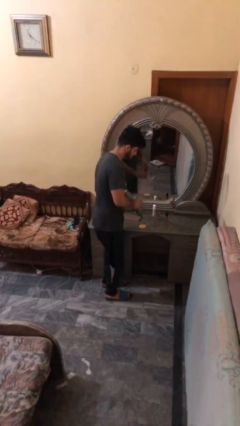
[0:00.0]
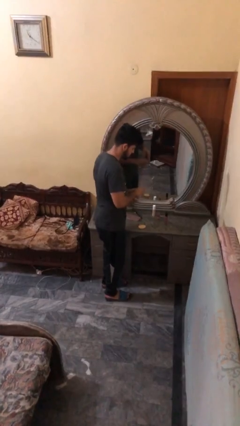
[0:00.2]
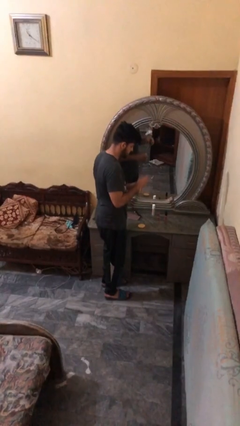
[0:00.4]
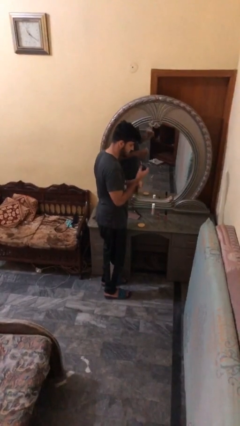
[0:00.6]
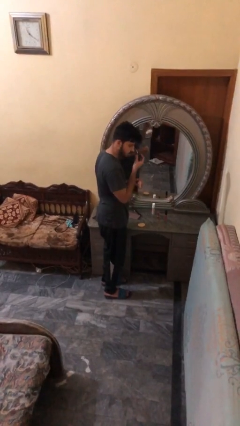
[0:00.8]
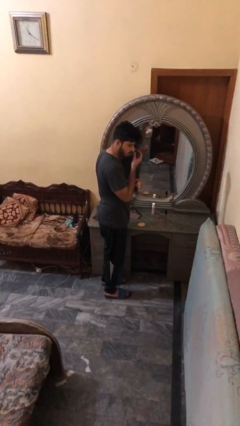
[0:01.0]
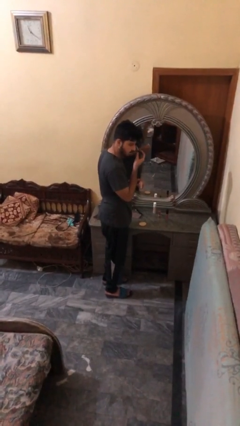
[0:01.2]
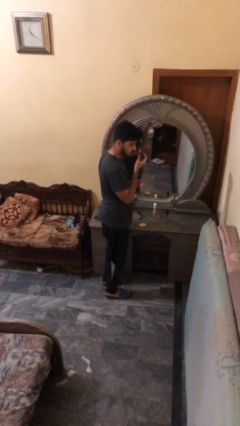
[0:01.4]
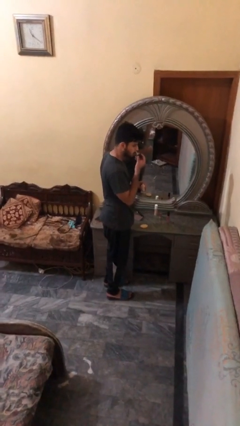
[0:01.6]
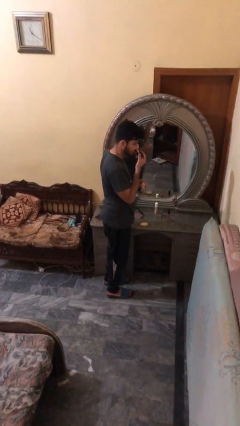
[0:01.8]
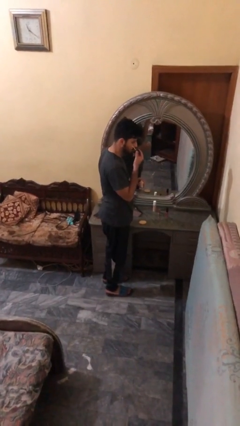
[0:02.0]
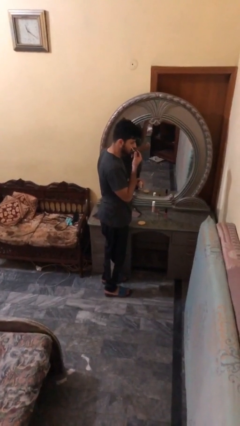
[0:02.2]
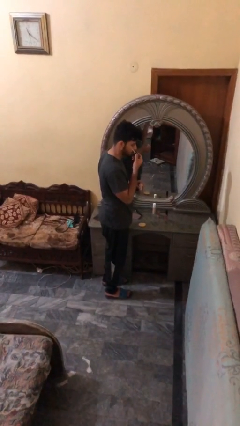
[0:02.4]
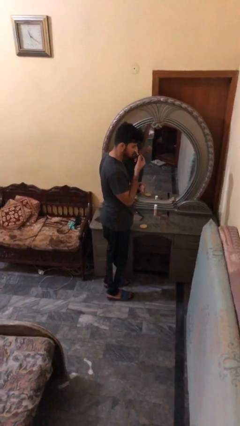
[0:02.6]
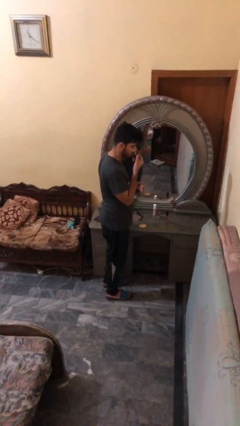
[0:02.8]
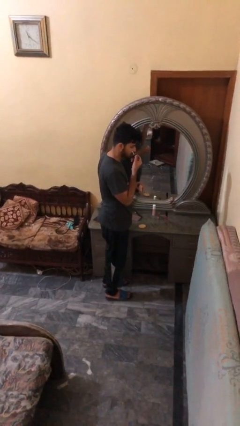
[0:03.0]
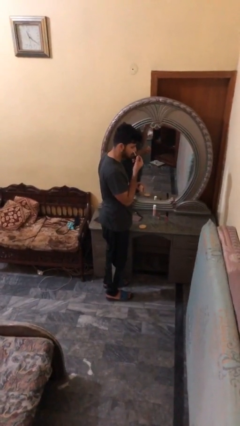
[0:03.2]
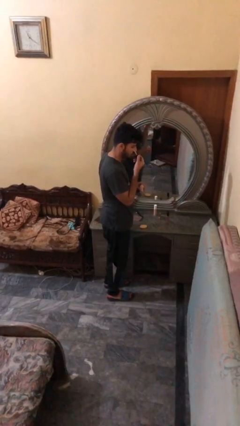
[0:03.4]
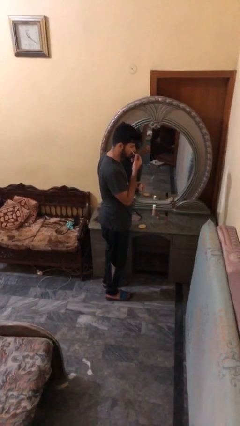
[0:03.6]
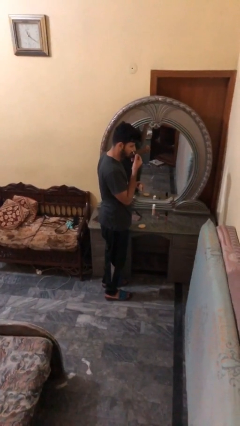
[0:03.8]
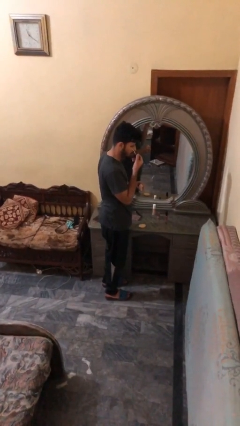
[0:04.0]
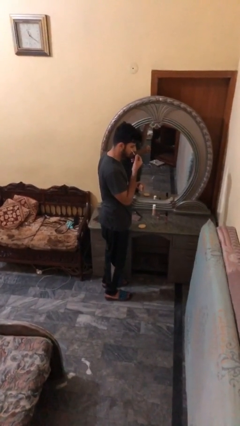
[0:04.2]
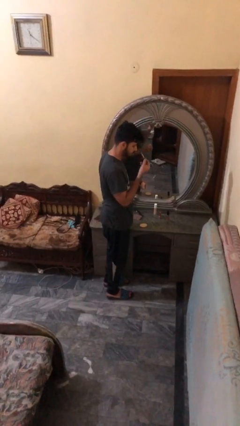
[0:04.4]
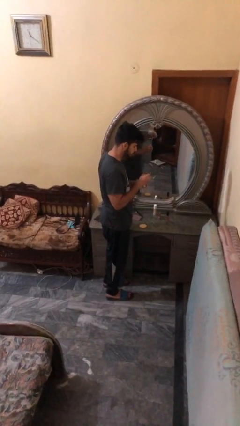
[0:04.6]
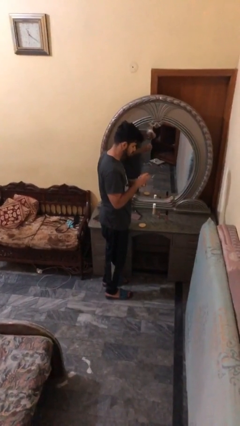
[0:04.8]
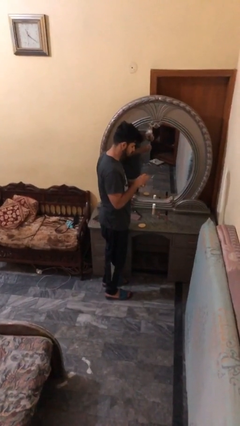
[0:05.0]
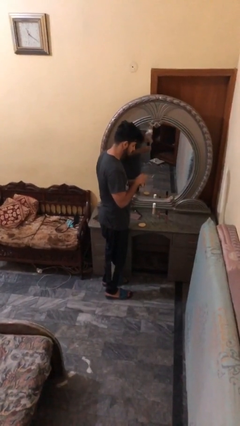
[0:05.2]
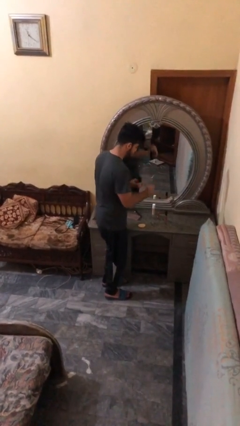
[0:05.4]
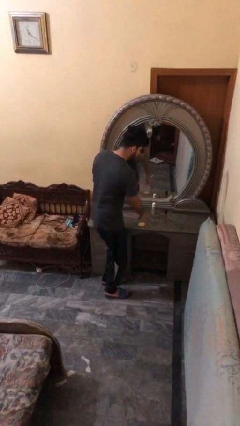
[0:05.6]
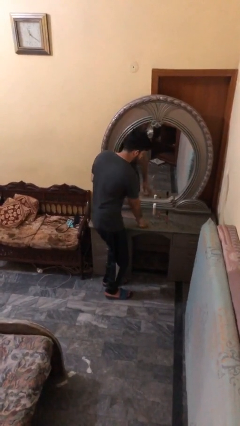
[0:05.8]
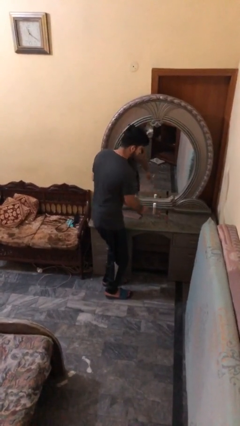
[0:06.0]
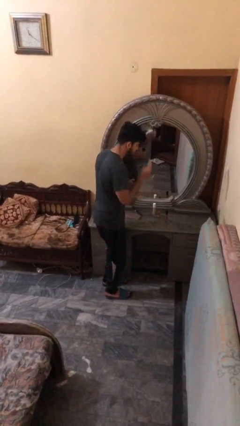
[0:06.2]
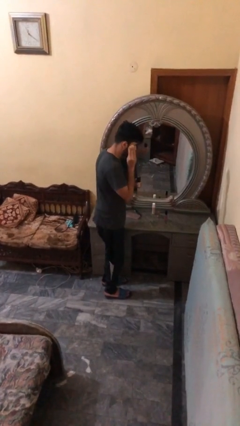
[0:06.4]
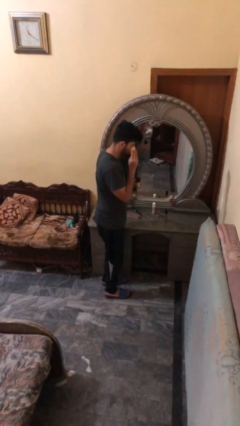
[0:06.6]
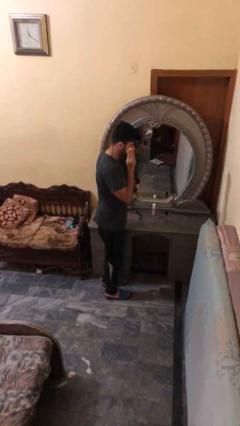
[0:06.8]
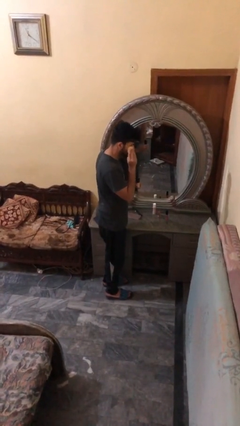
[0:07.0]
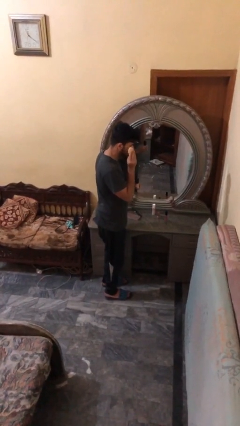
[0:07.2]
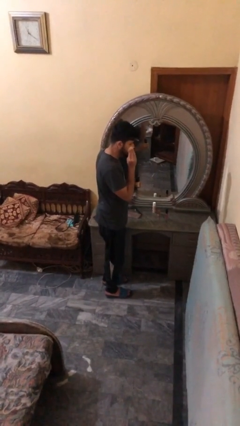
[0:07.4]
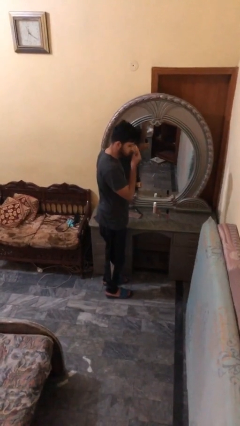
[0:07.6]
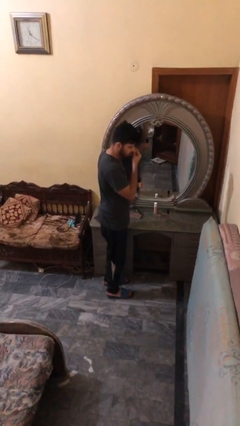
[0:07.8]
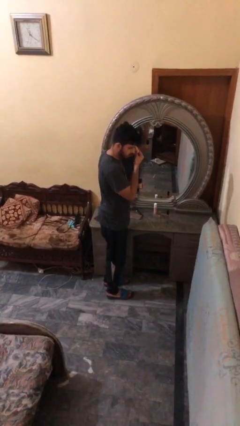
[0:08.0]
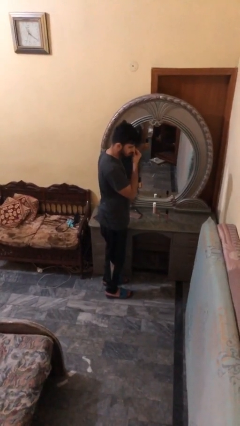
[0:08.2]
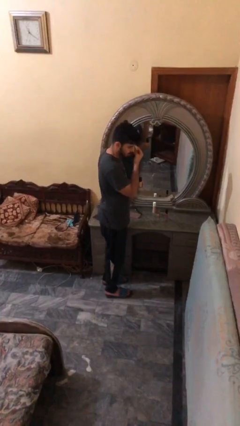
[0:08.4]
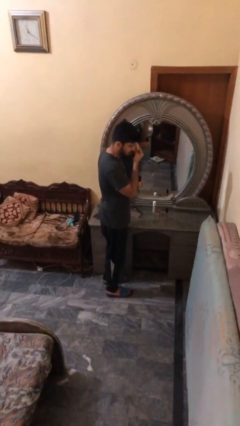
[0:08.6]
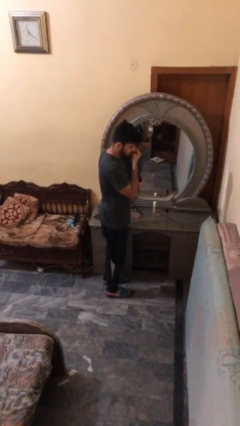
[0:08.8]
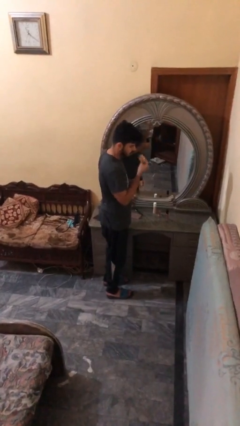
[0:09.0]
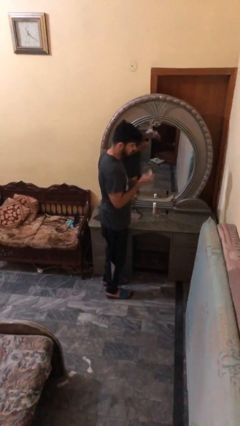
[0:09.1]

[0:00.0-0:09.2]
person applies foundation makeup

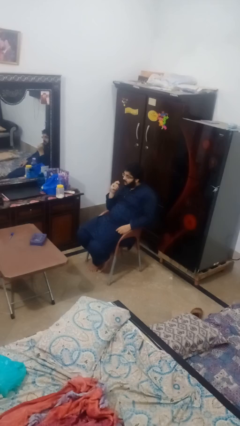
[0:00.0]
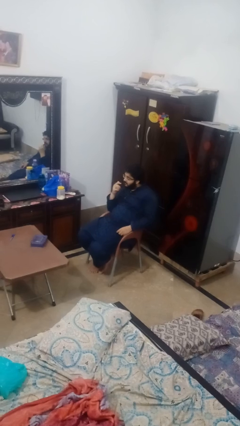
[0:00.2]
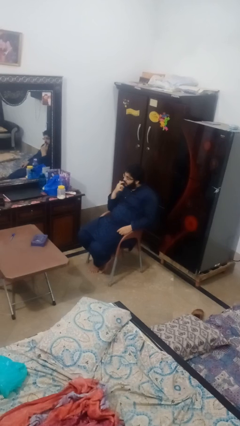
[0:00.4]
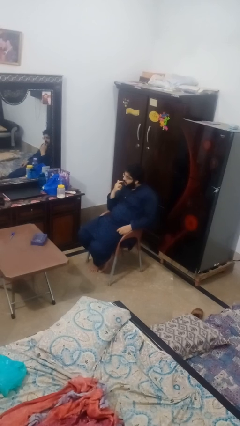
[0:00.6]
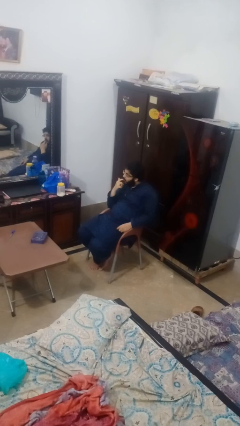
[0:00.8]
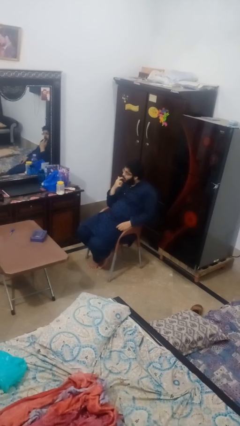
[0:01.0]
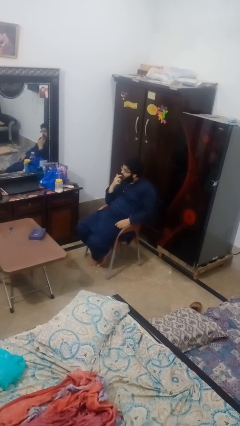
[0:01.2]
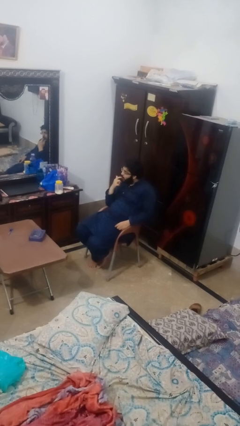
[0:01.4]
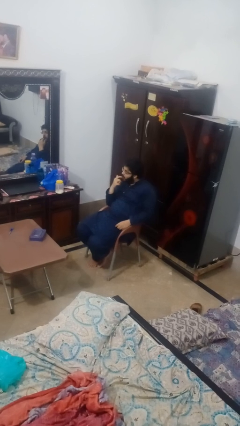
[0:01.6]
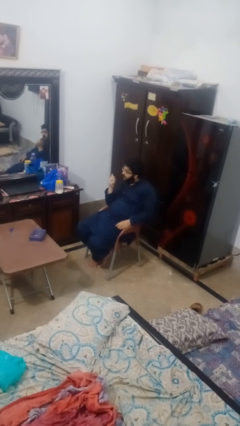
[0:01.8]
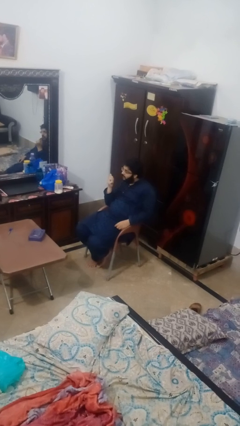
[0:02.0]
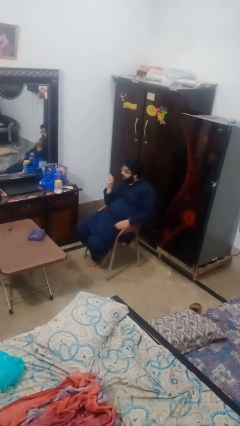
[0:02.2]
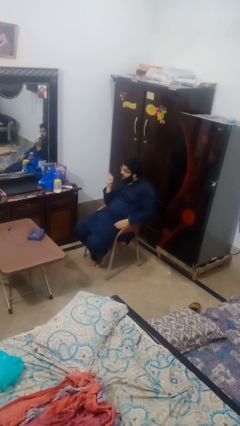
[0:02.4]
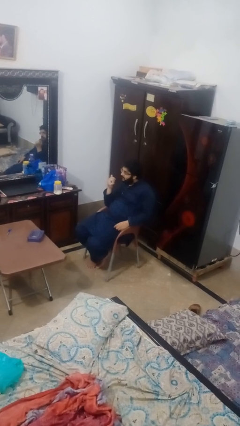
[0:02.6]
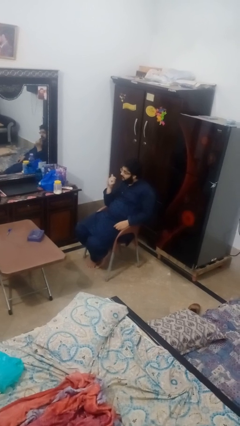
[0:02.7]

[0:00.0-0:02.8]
person licks fingers

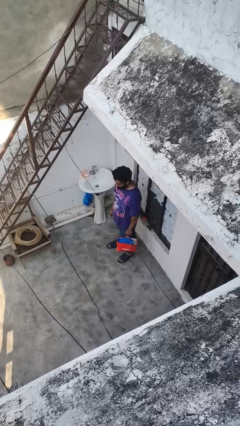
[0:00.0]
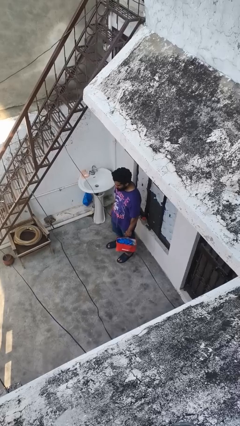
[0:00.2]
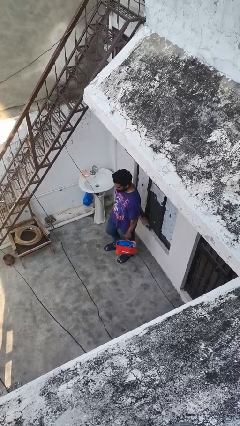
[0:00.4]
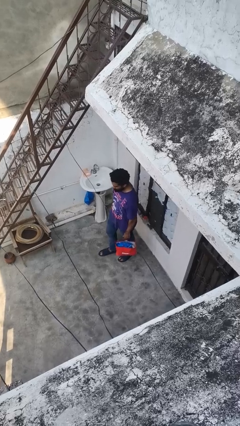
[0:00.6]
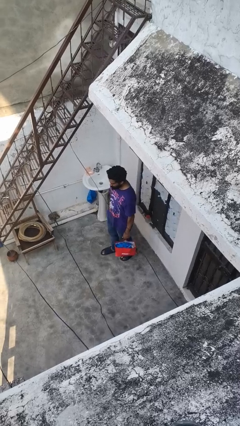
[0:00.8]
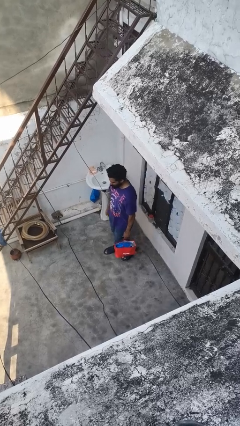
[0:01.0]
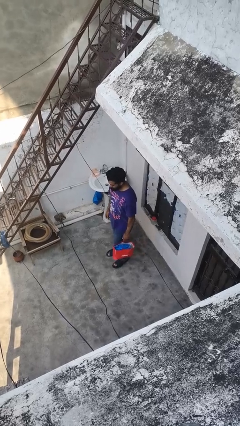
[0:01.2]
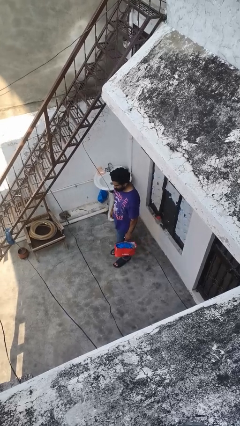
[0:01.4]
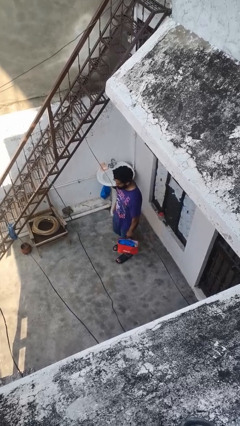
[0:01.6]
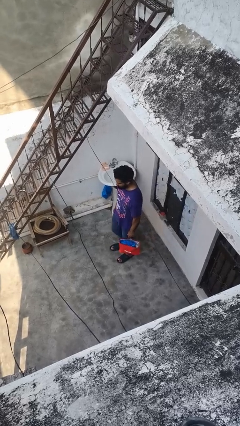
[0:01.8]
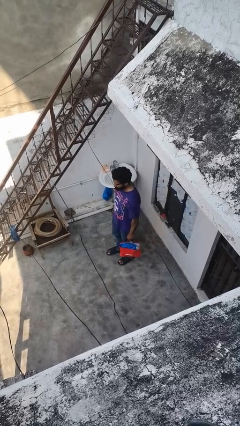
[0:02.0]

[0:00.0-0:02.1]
person carries groceries

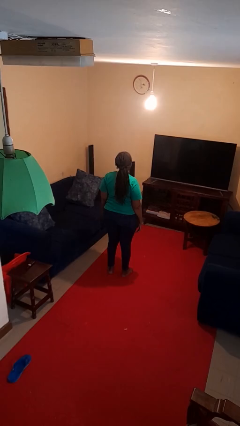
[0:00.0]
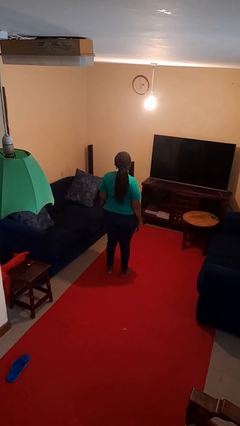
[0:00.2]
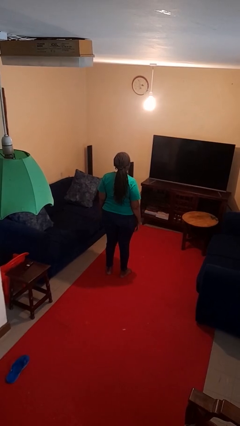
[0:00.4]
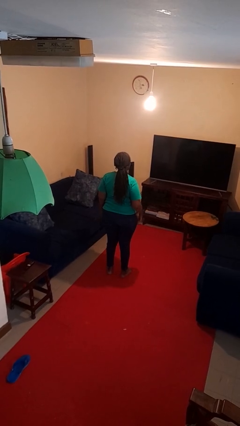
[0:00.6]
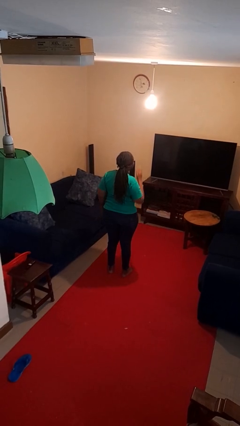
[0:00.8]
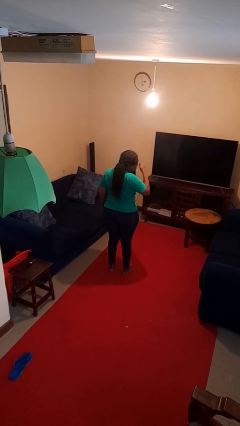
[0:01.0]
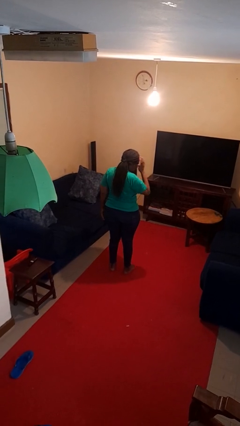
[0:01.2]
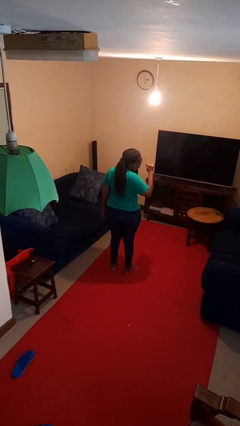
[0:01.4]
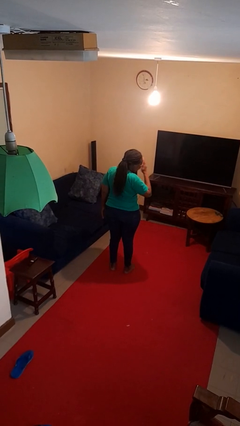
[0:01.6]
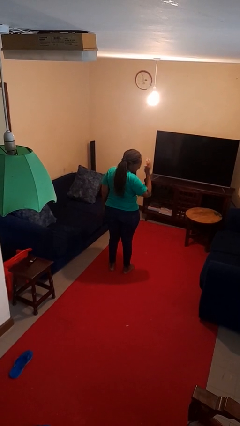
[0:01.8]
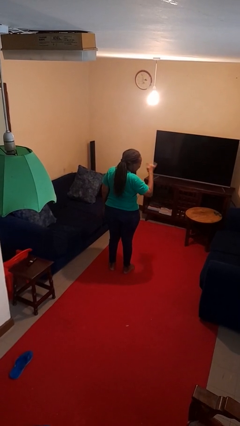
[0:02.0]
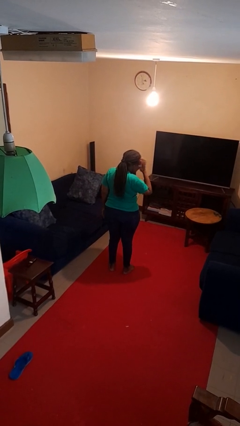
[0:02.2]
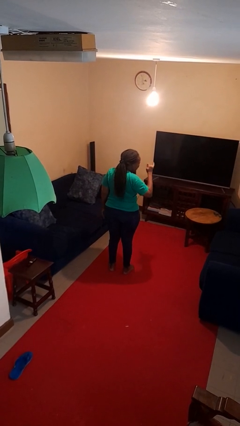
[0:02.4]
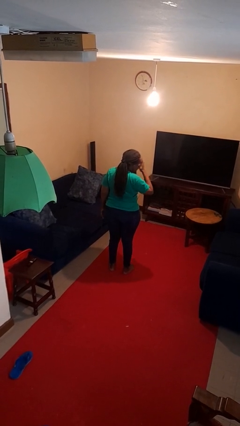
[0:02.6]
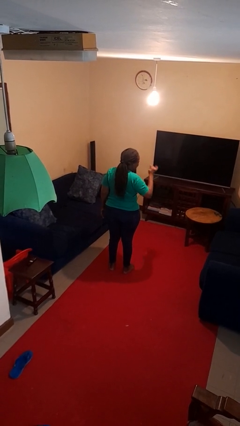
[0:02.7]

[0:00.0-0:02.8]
person swats bug

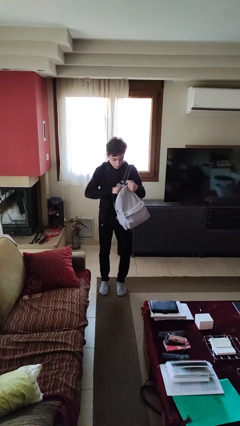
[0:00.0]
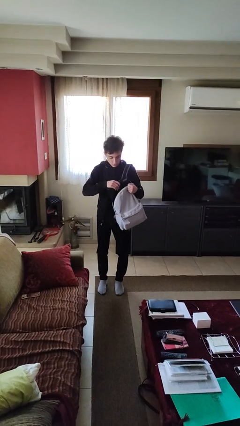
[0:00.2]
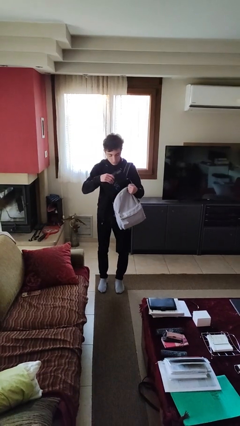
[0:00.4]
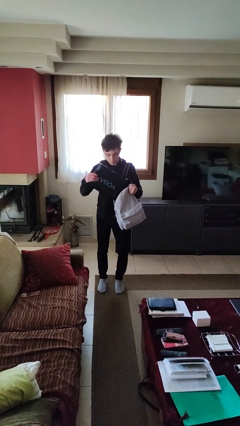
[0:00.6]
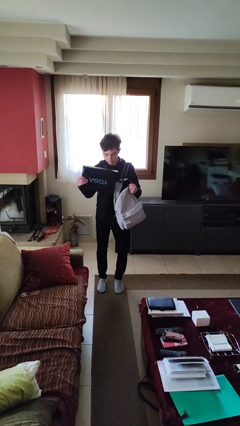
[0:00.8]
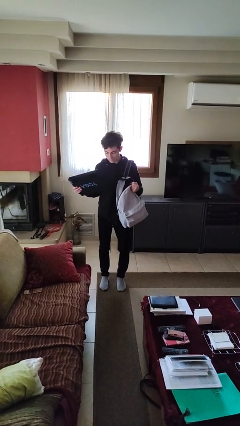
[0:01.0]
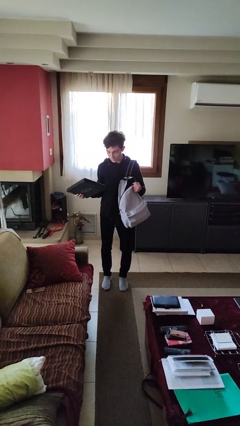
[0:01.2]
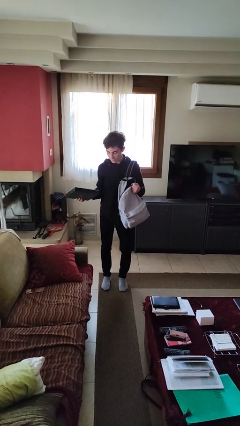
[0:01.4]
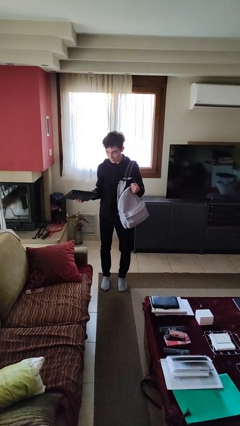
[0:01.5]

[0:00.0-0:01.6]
person takes object from backpack
